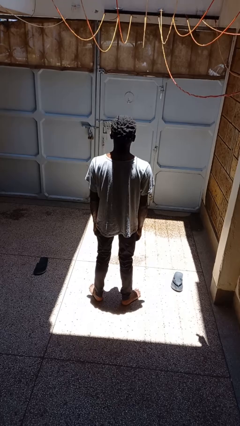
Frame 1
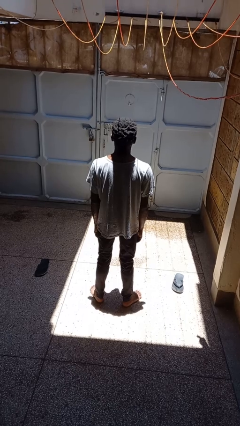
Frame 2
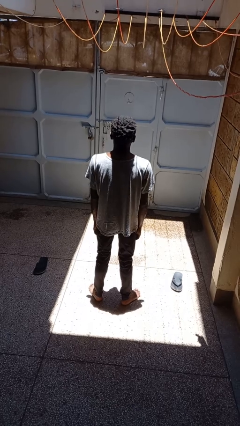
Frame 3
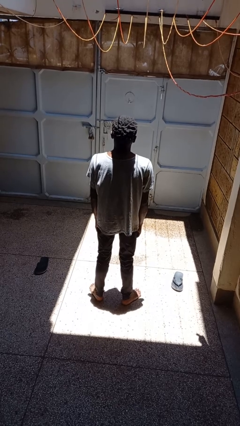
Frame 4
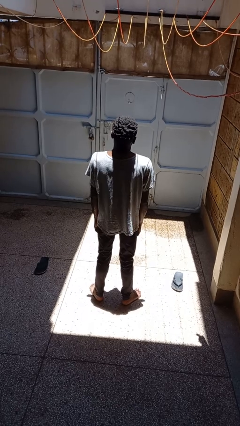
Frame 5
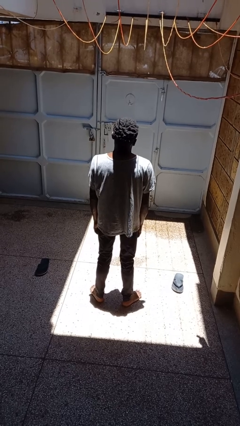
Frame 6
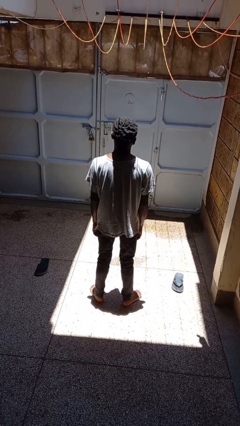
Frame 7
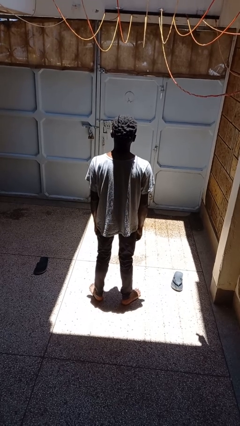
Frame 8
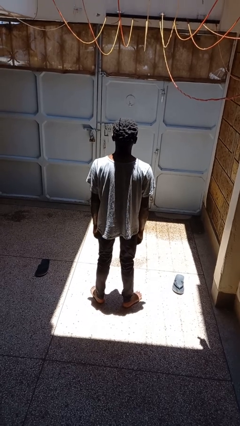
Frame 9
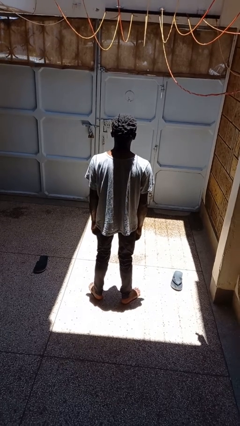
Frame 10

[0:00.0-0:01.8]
person shrugs

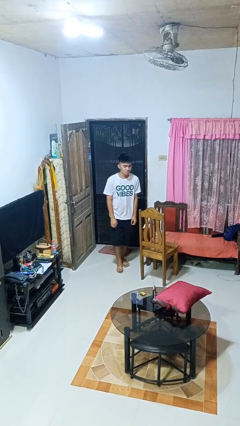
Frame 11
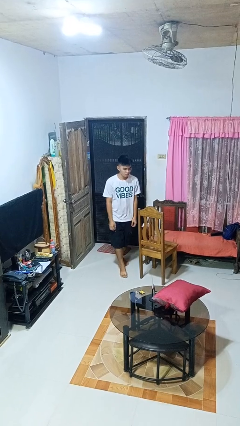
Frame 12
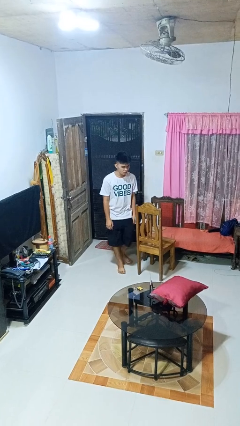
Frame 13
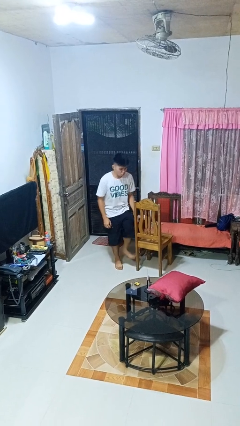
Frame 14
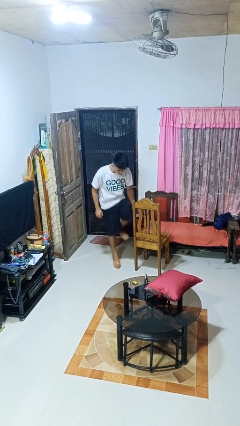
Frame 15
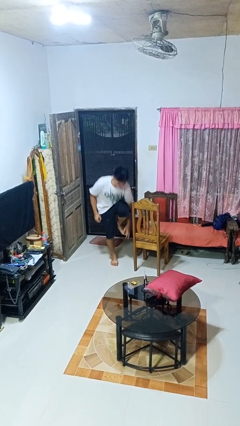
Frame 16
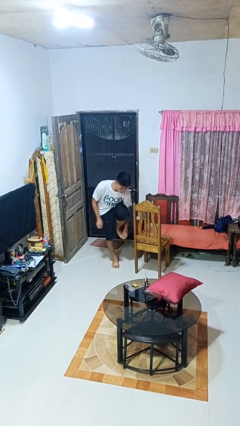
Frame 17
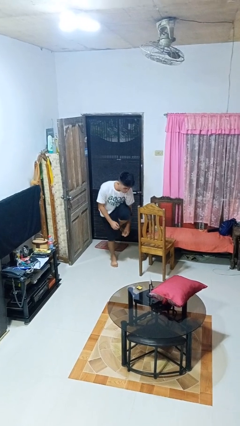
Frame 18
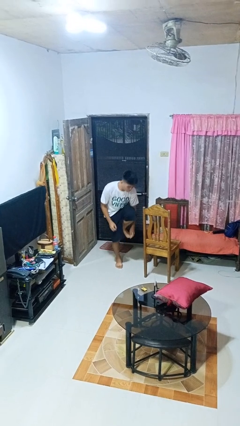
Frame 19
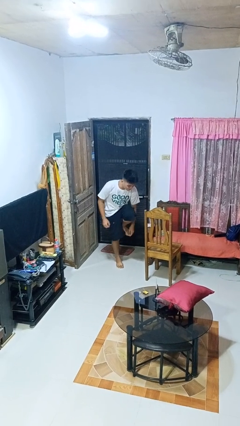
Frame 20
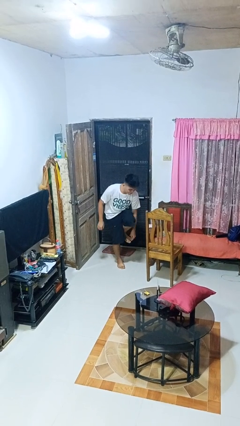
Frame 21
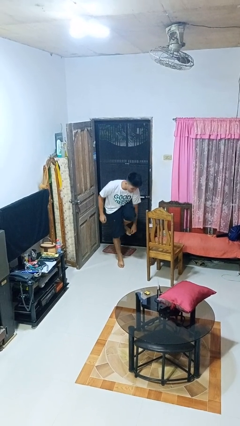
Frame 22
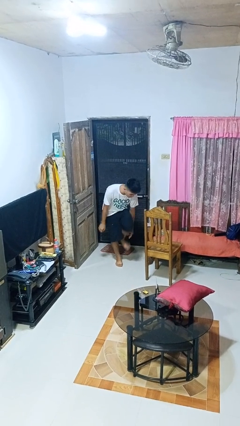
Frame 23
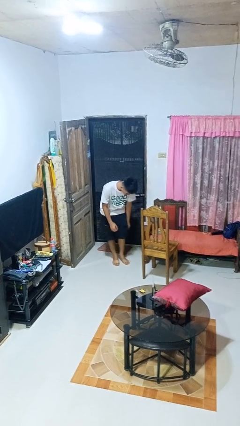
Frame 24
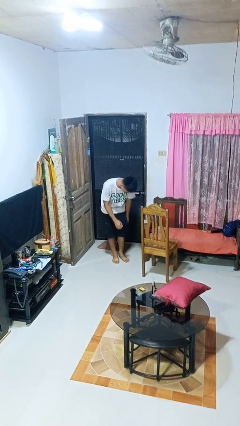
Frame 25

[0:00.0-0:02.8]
person stubs toe

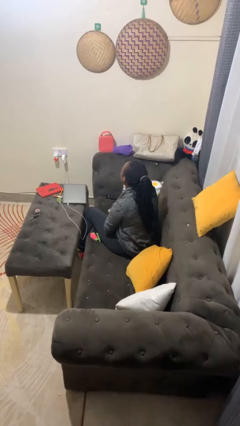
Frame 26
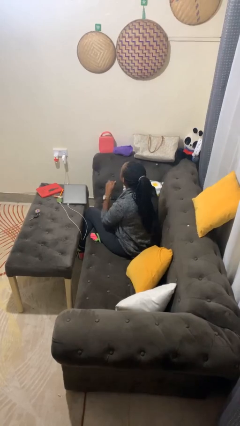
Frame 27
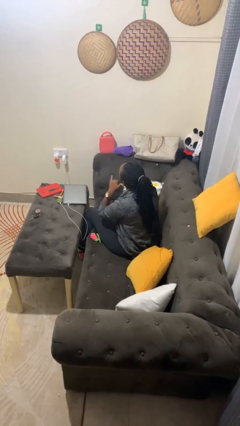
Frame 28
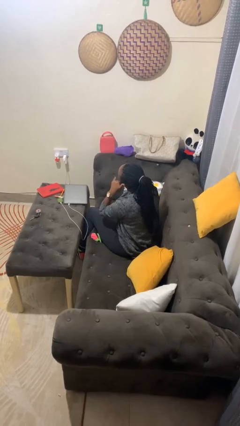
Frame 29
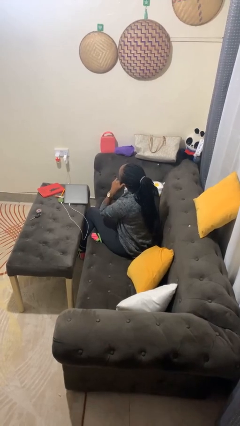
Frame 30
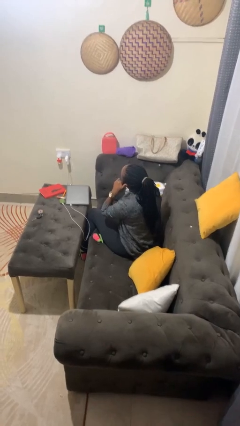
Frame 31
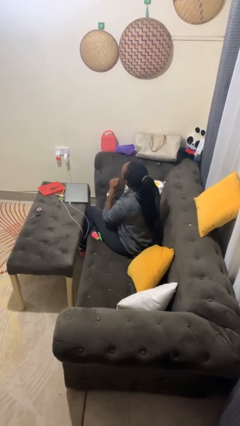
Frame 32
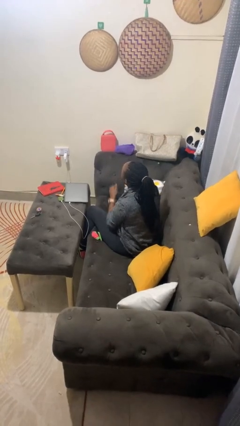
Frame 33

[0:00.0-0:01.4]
person gestures call me

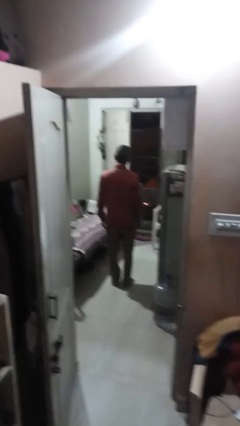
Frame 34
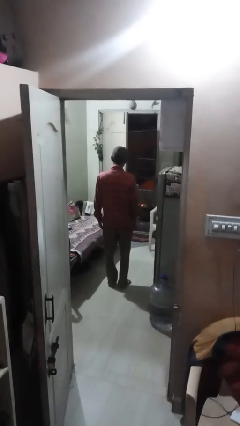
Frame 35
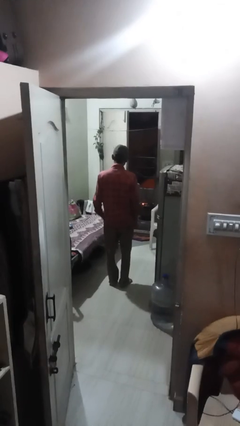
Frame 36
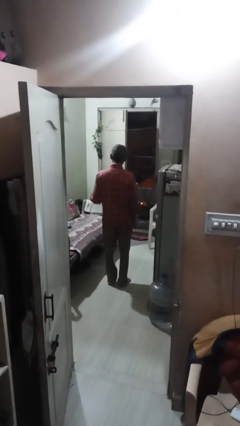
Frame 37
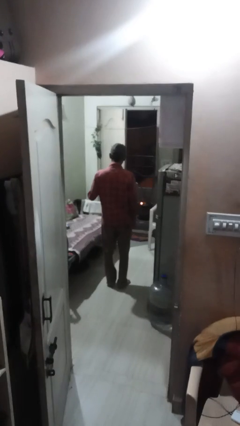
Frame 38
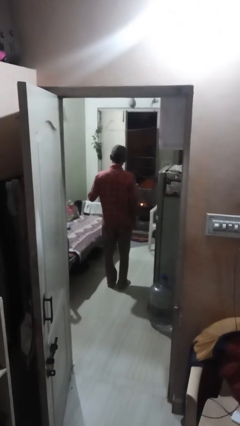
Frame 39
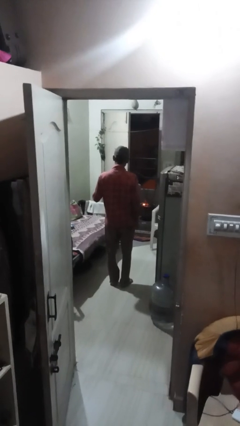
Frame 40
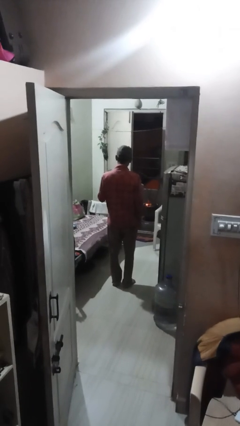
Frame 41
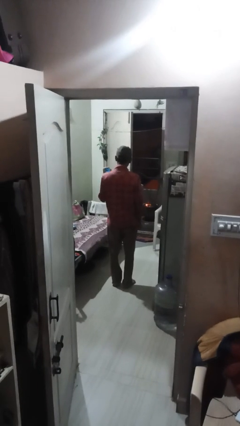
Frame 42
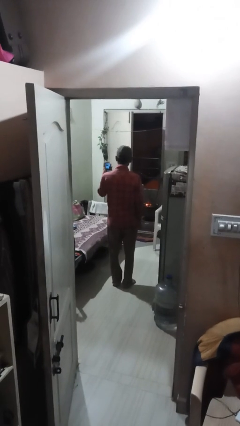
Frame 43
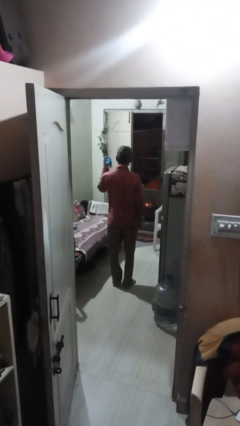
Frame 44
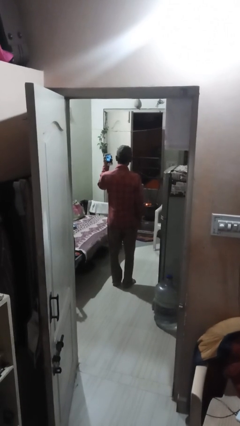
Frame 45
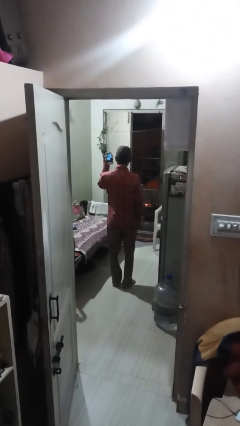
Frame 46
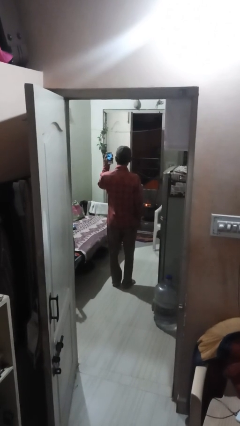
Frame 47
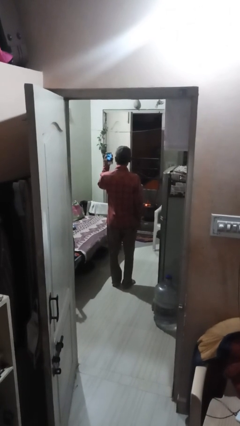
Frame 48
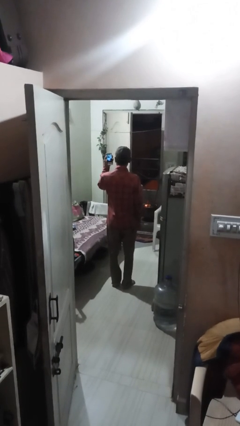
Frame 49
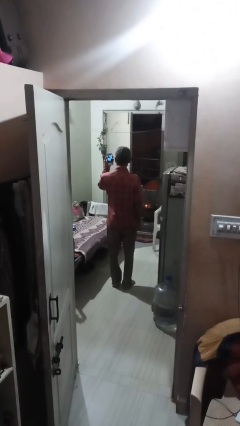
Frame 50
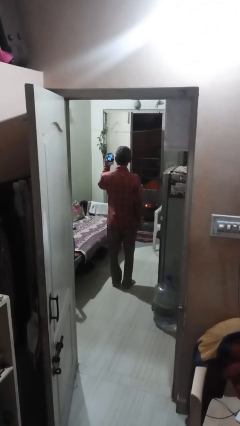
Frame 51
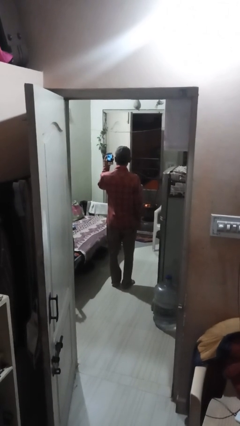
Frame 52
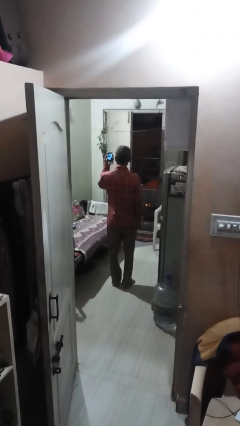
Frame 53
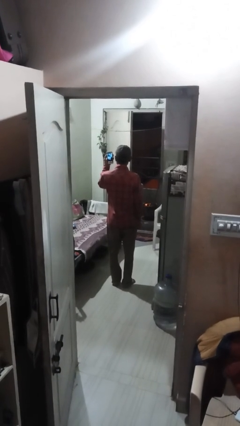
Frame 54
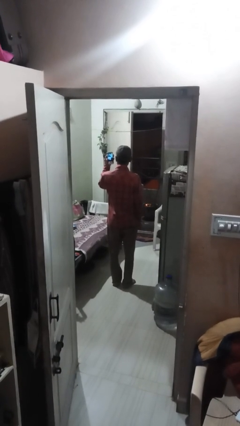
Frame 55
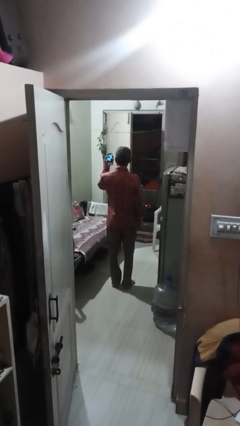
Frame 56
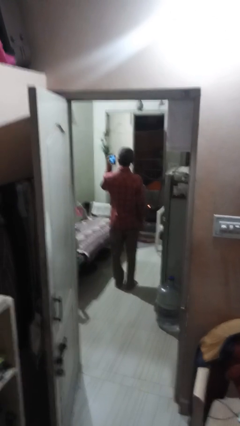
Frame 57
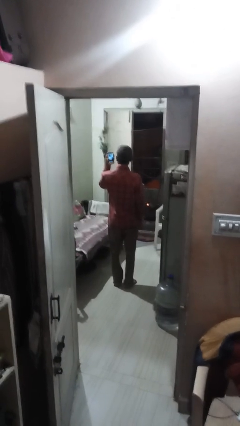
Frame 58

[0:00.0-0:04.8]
person takes phone from pocket

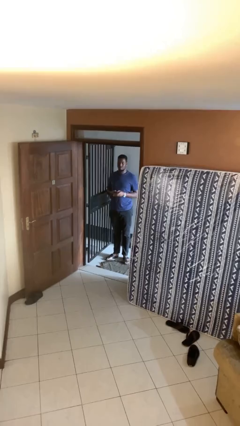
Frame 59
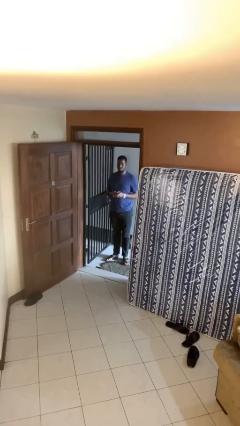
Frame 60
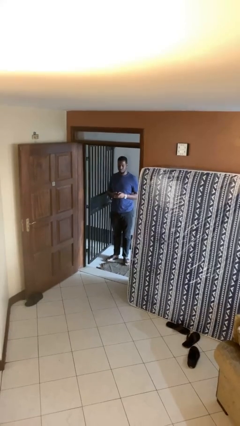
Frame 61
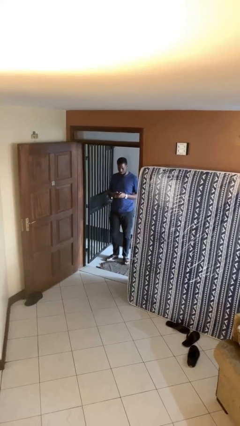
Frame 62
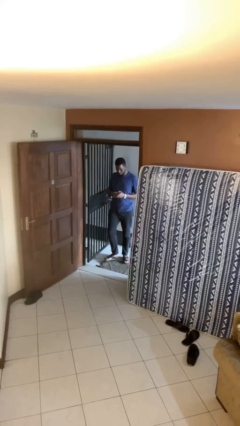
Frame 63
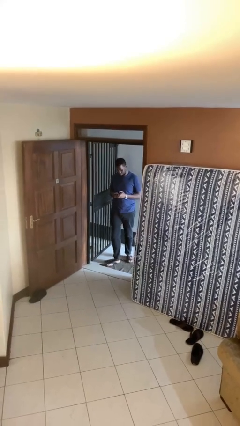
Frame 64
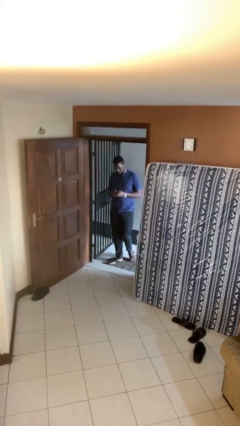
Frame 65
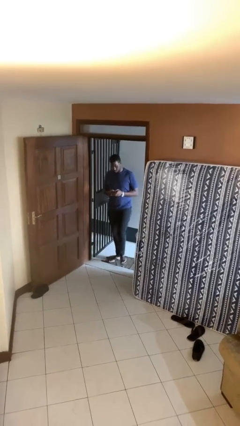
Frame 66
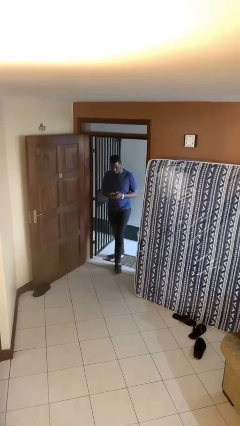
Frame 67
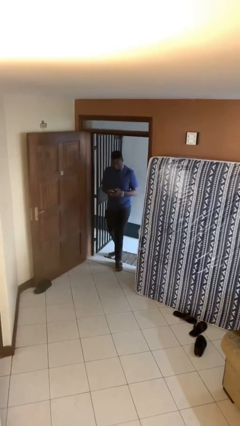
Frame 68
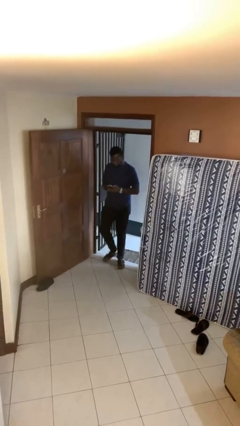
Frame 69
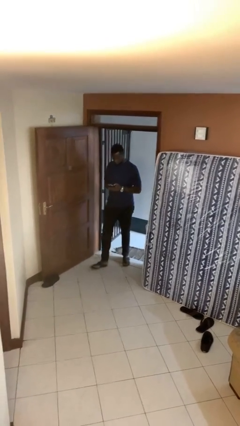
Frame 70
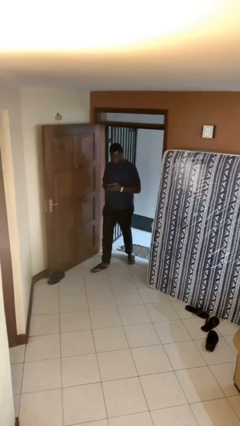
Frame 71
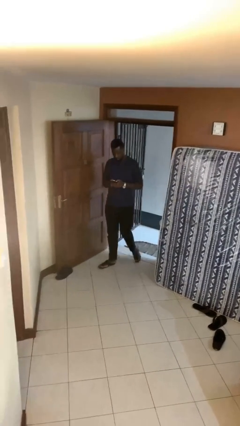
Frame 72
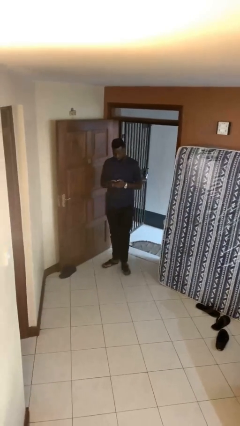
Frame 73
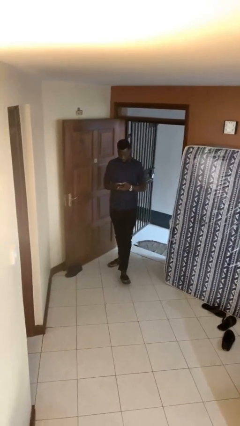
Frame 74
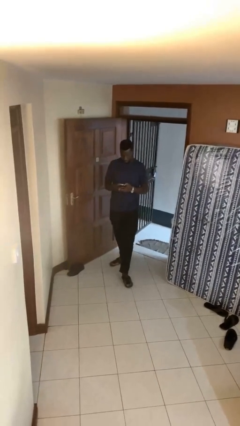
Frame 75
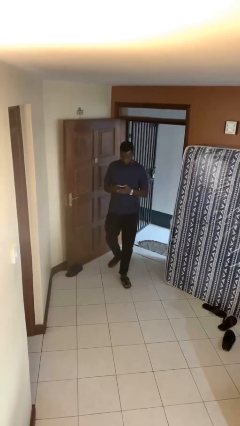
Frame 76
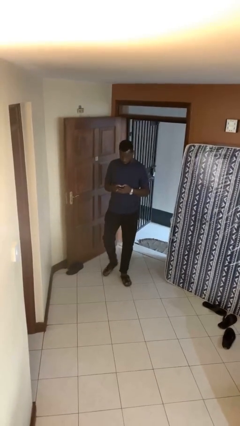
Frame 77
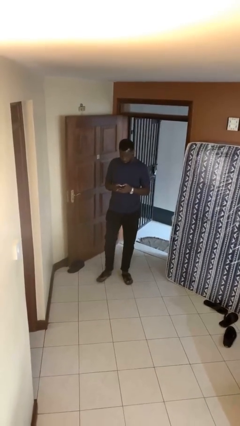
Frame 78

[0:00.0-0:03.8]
person enters scene through structure

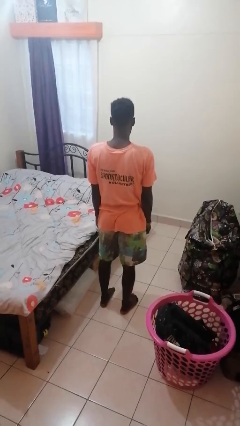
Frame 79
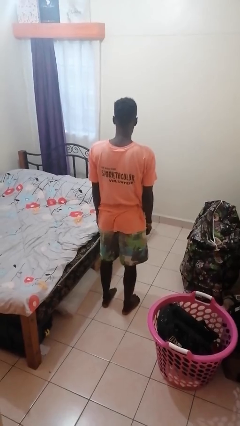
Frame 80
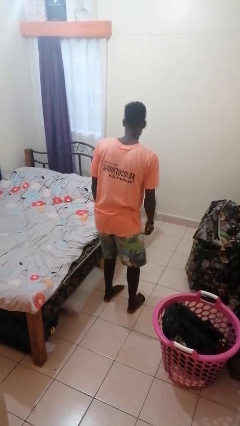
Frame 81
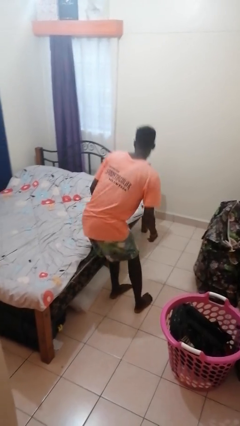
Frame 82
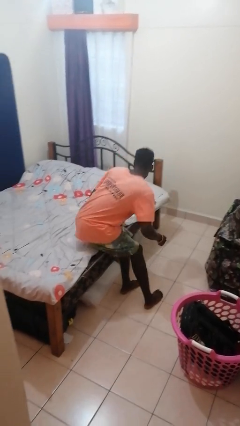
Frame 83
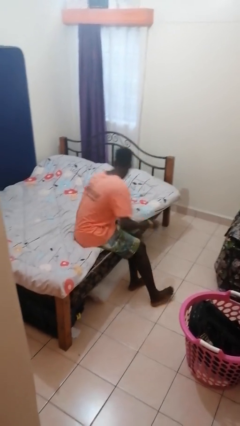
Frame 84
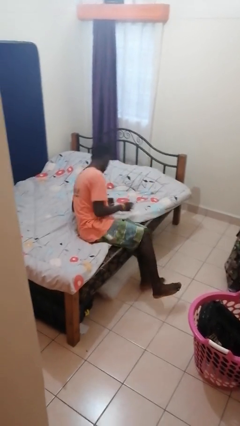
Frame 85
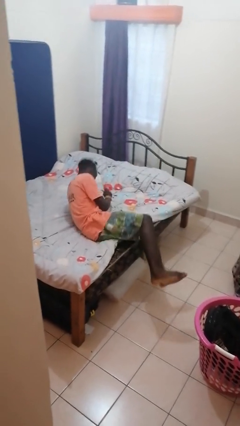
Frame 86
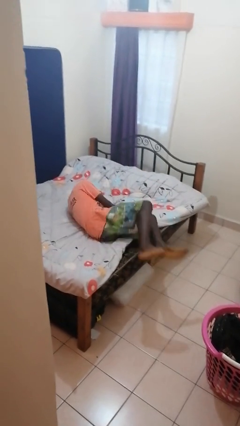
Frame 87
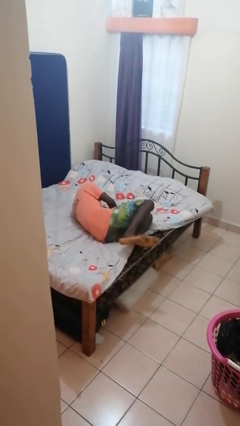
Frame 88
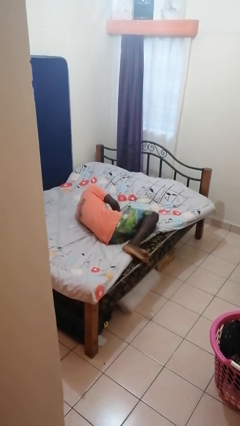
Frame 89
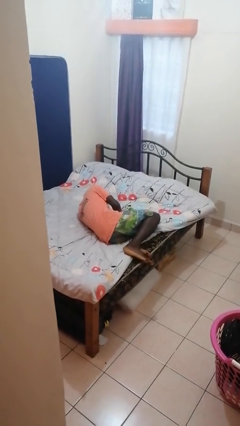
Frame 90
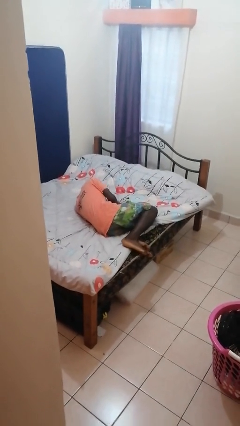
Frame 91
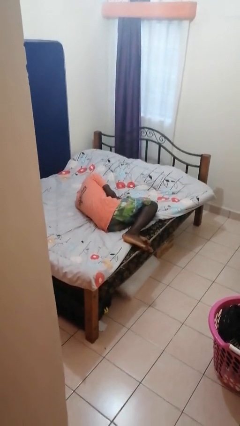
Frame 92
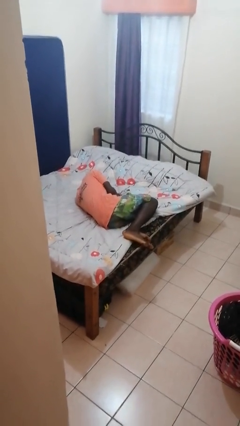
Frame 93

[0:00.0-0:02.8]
person lies down on bed
